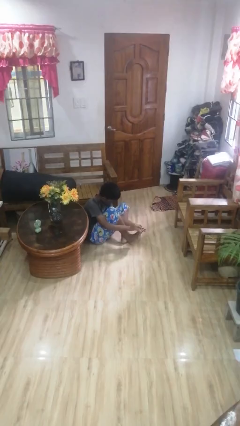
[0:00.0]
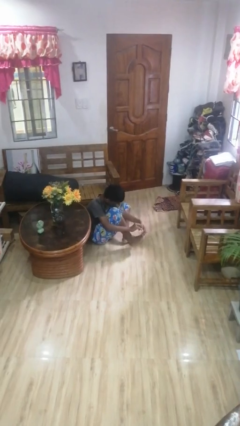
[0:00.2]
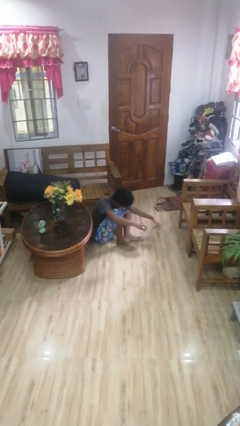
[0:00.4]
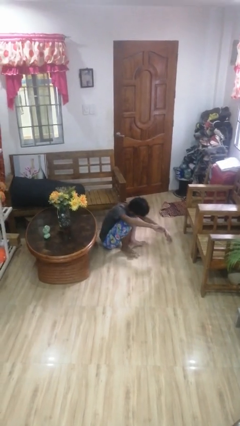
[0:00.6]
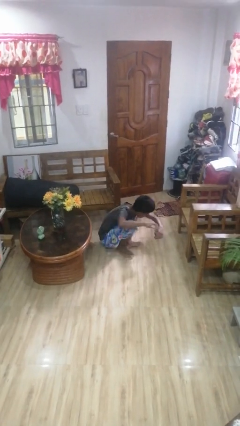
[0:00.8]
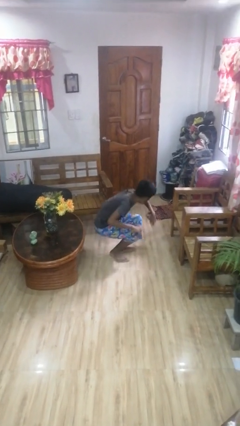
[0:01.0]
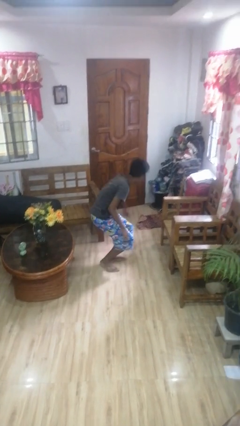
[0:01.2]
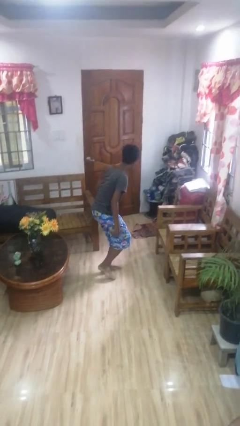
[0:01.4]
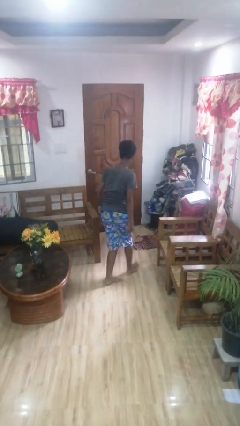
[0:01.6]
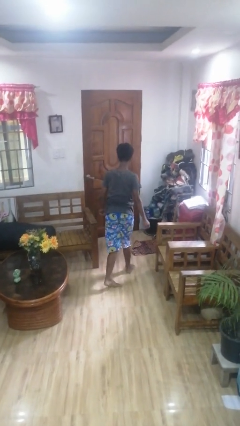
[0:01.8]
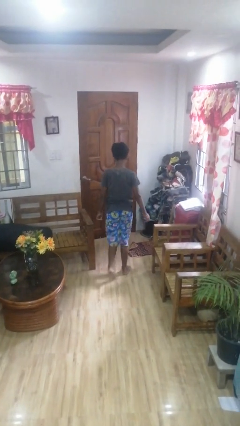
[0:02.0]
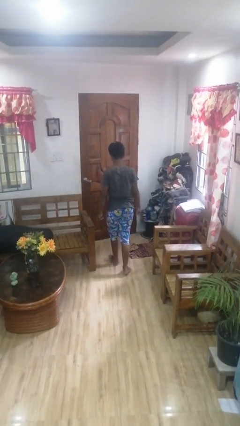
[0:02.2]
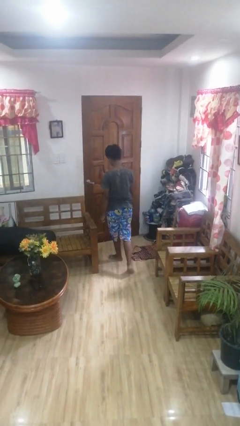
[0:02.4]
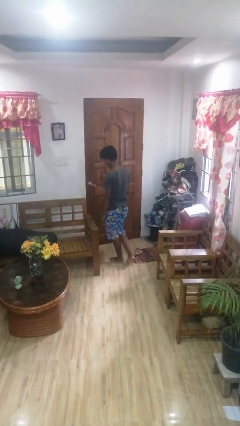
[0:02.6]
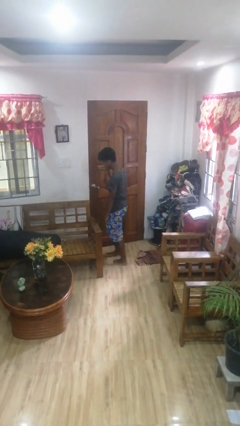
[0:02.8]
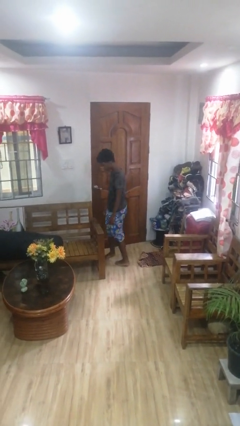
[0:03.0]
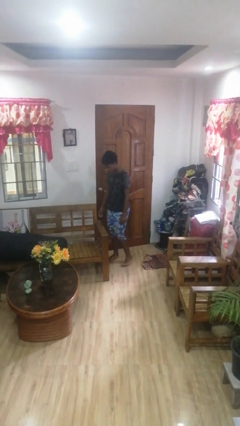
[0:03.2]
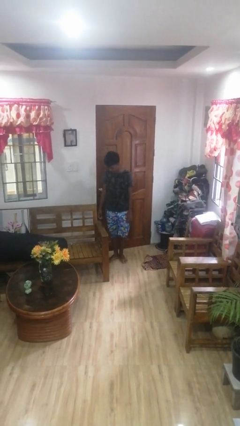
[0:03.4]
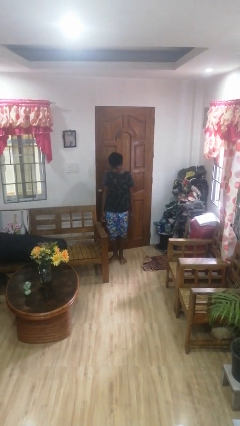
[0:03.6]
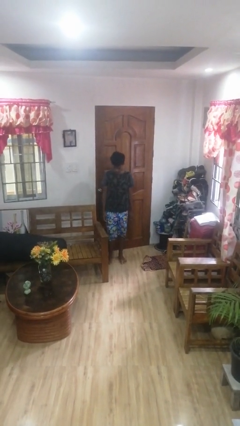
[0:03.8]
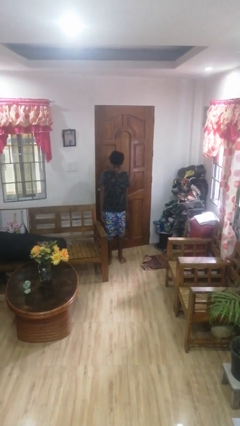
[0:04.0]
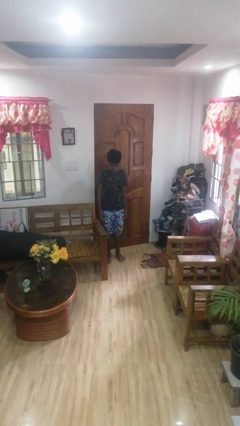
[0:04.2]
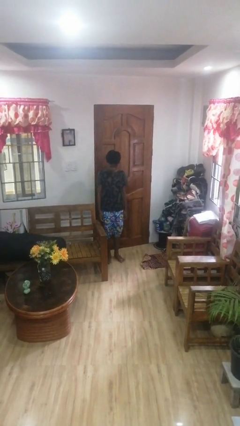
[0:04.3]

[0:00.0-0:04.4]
person stands up from floor

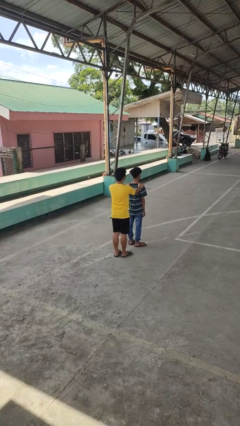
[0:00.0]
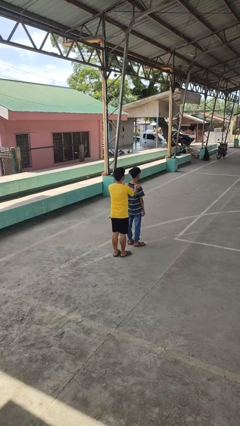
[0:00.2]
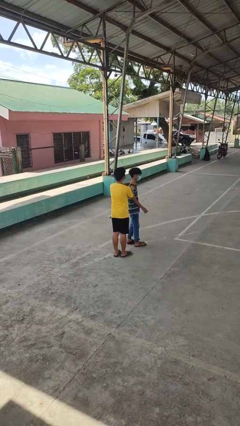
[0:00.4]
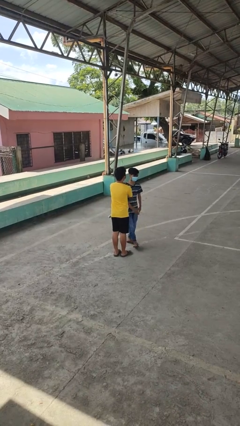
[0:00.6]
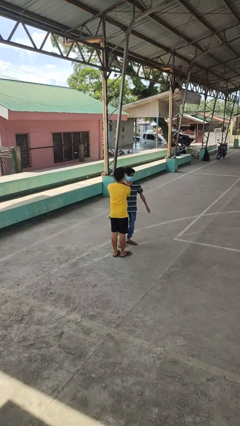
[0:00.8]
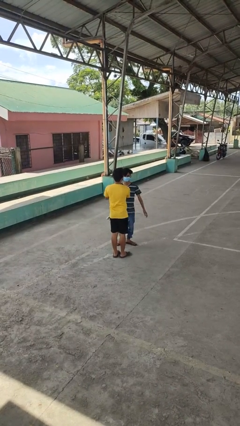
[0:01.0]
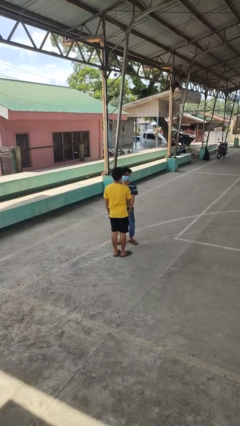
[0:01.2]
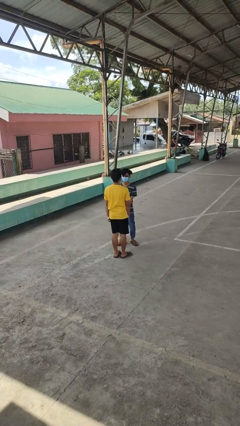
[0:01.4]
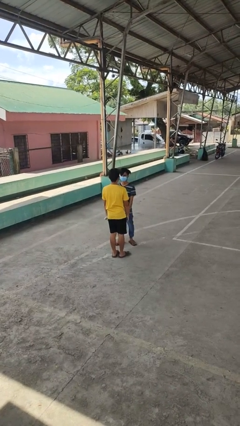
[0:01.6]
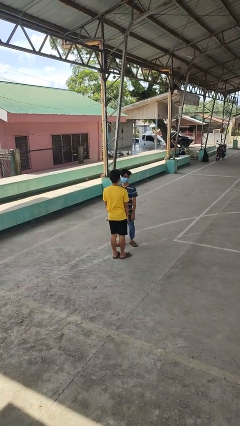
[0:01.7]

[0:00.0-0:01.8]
person spins person around

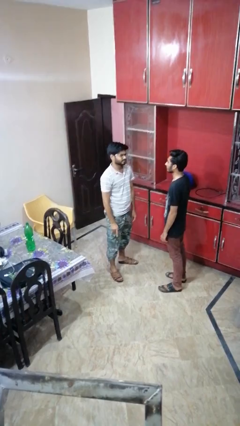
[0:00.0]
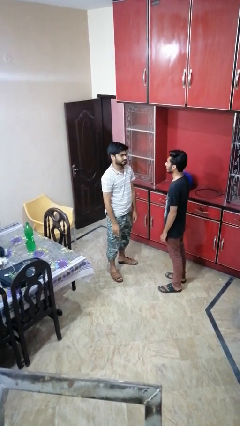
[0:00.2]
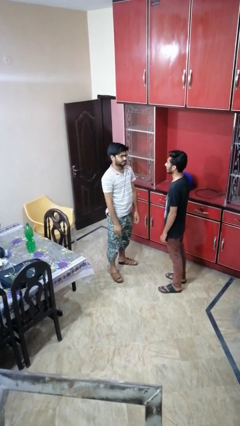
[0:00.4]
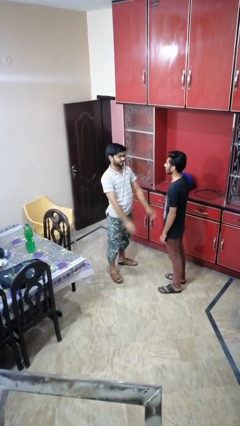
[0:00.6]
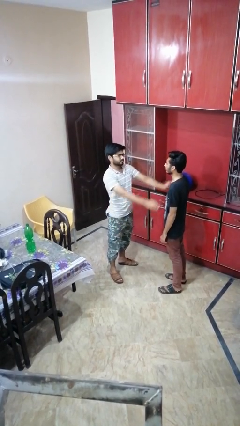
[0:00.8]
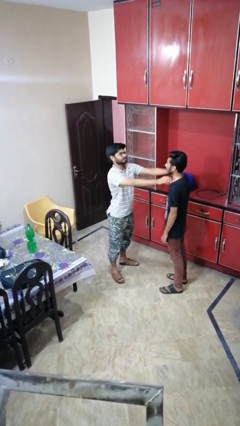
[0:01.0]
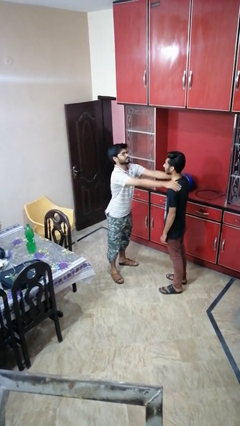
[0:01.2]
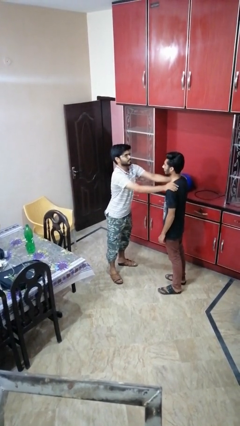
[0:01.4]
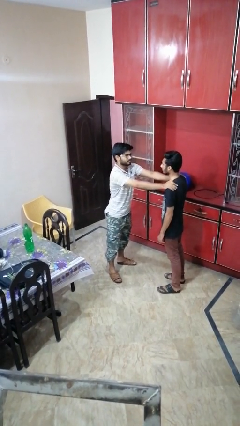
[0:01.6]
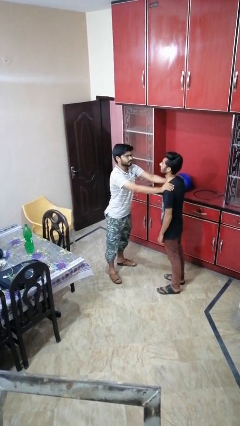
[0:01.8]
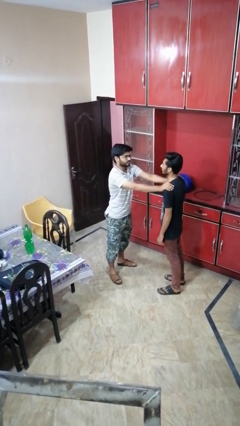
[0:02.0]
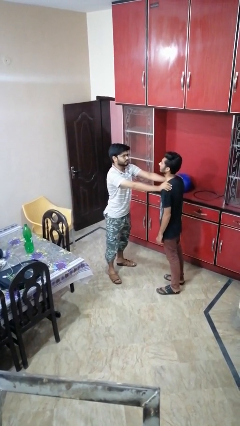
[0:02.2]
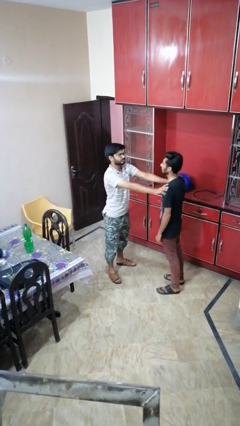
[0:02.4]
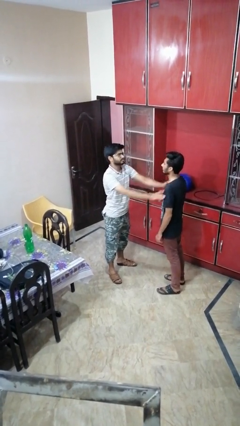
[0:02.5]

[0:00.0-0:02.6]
person pounds shoulders of person

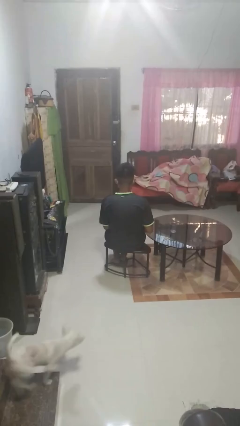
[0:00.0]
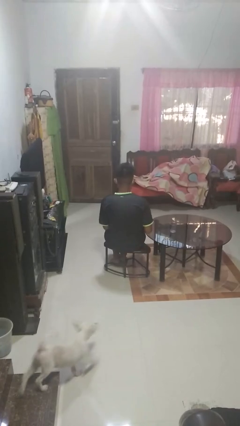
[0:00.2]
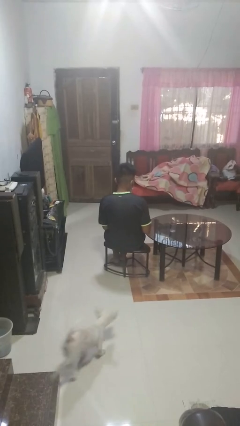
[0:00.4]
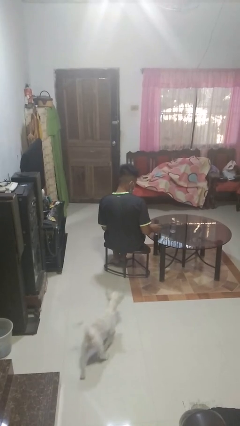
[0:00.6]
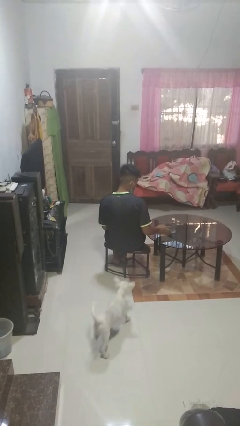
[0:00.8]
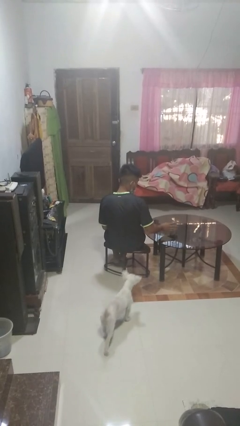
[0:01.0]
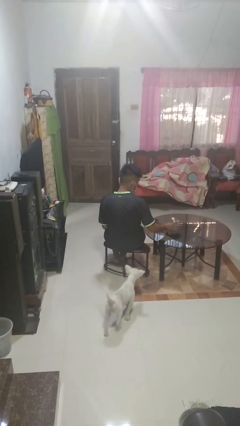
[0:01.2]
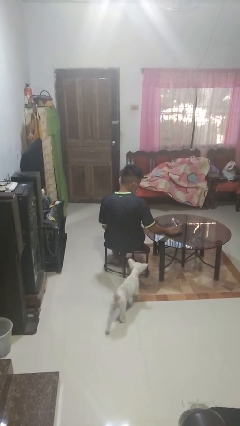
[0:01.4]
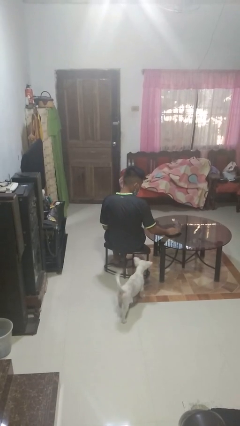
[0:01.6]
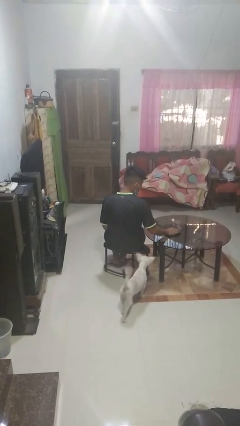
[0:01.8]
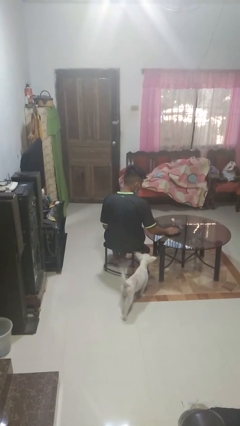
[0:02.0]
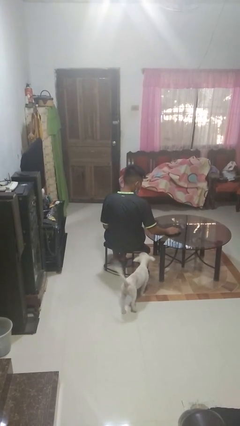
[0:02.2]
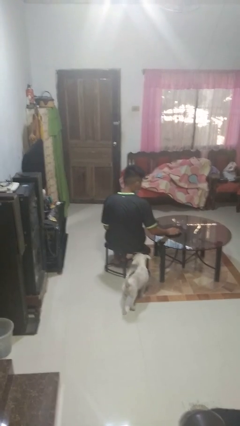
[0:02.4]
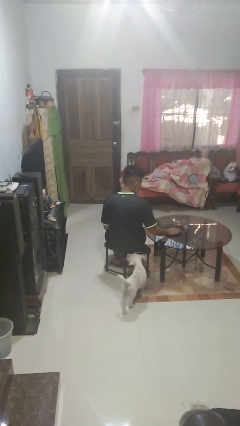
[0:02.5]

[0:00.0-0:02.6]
person knocks over glass

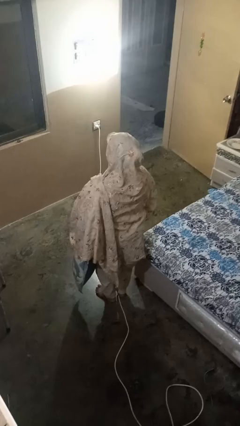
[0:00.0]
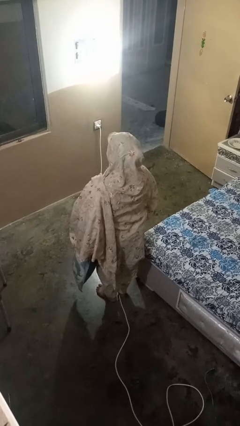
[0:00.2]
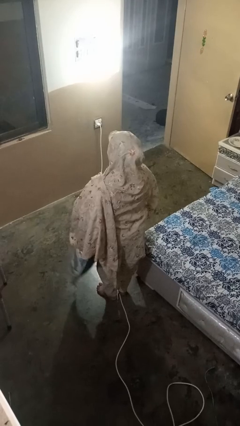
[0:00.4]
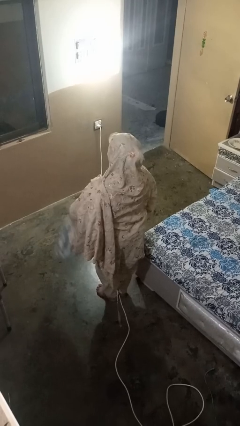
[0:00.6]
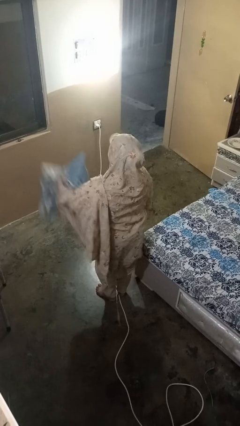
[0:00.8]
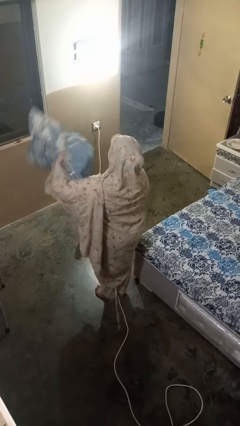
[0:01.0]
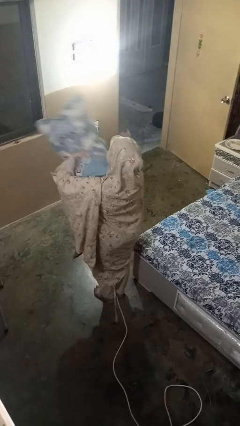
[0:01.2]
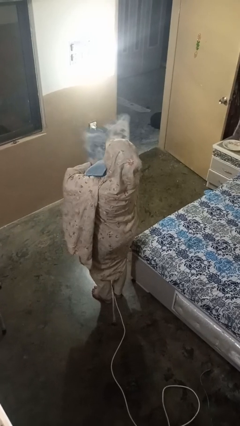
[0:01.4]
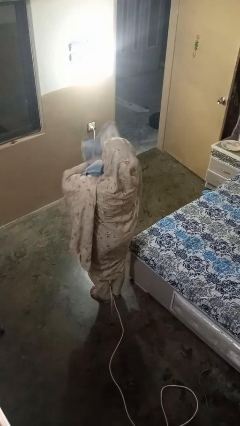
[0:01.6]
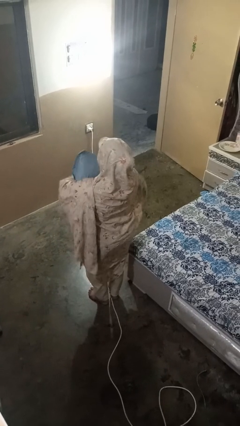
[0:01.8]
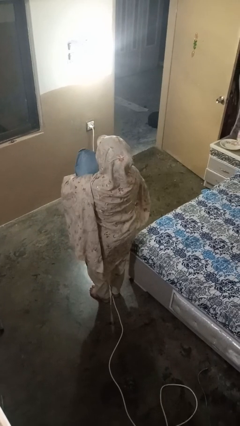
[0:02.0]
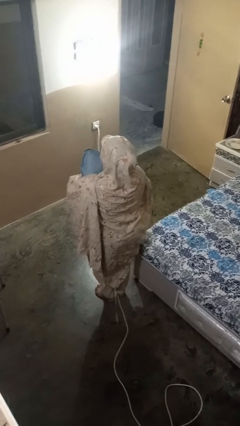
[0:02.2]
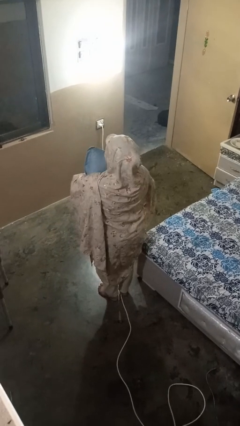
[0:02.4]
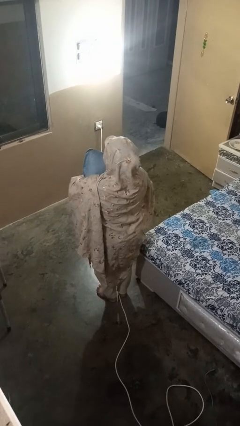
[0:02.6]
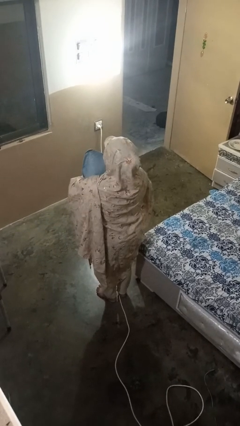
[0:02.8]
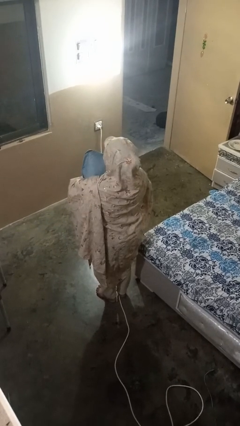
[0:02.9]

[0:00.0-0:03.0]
person squeezes object

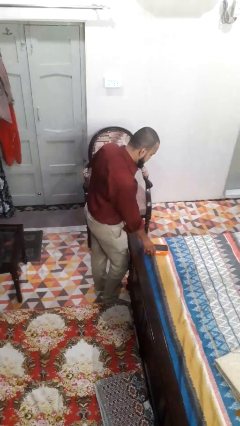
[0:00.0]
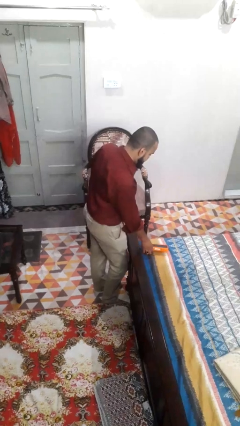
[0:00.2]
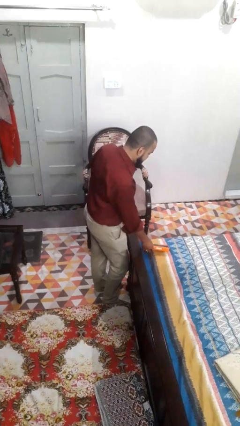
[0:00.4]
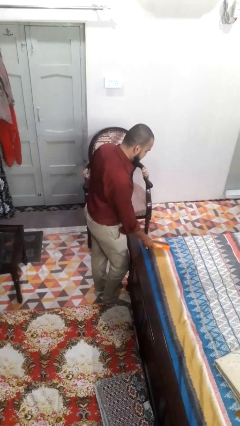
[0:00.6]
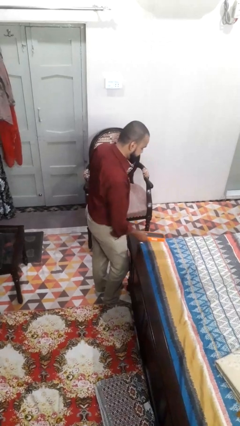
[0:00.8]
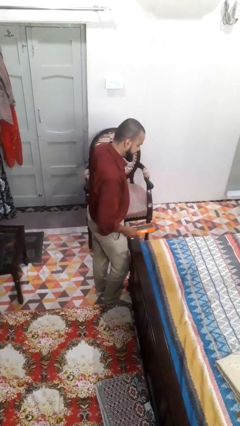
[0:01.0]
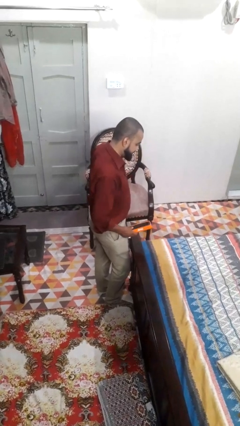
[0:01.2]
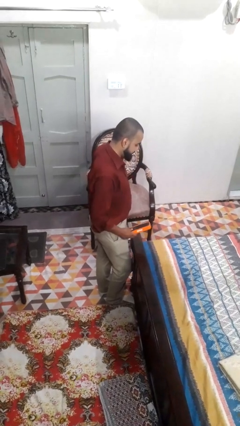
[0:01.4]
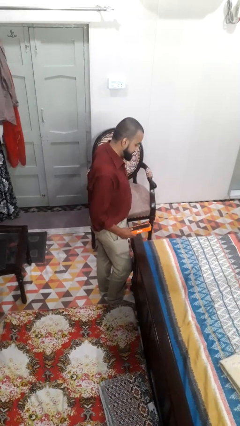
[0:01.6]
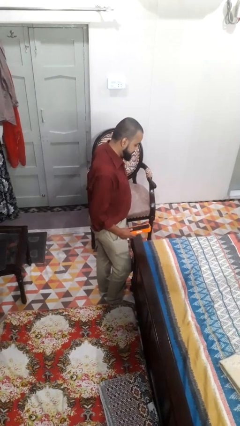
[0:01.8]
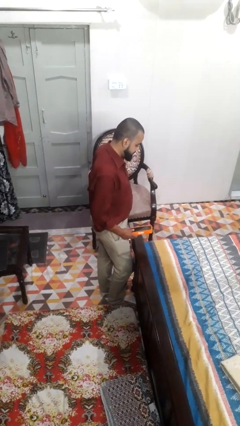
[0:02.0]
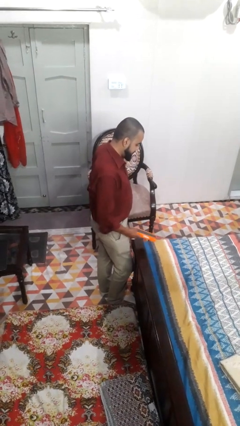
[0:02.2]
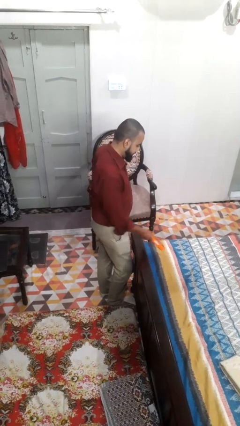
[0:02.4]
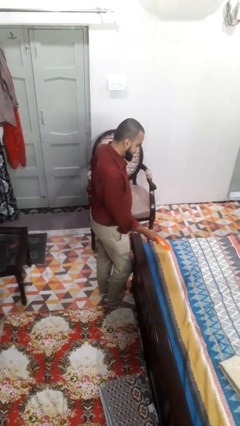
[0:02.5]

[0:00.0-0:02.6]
person picks up object from bed

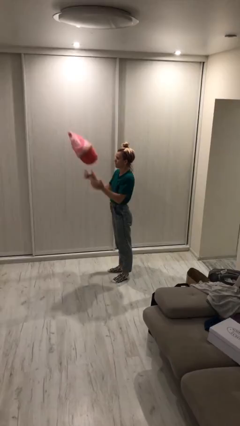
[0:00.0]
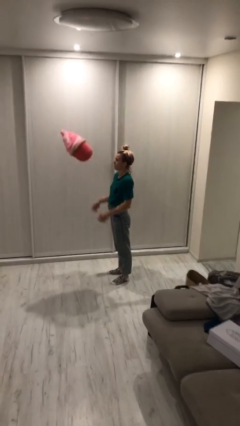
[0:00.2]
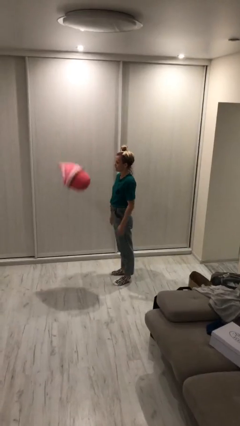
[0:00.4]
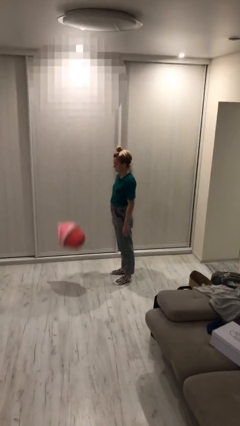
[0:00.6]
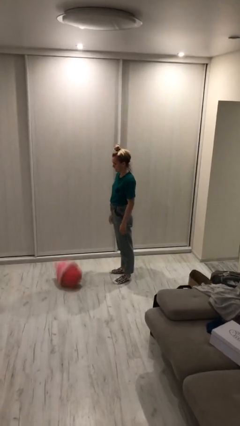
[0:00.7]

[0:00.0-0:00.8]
person throws object into air
